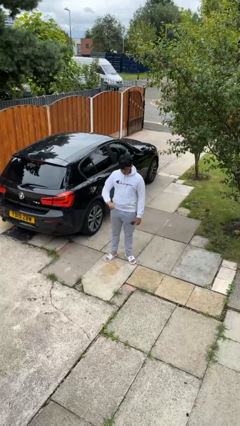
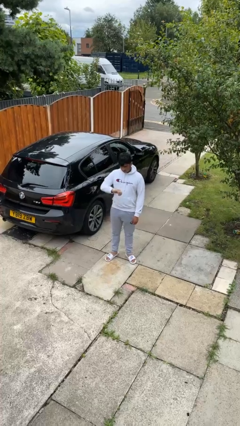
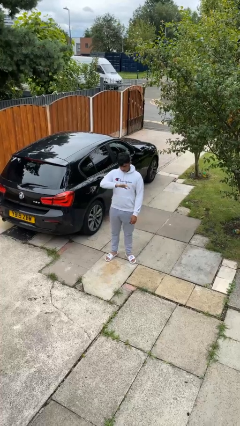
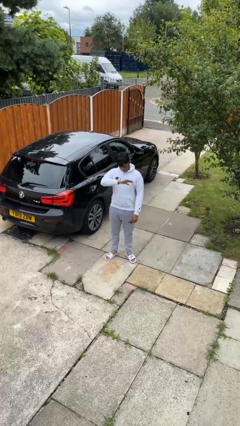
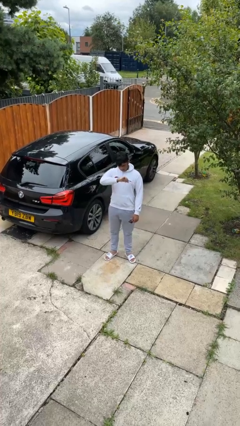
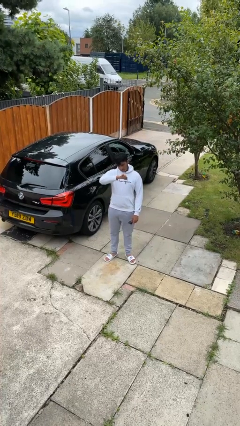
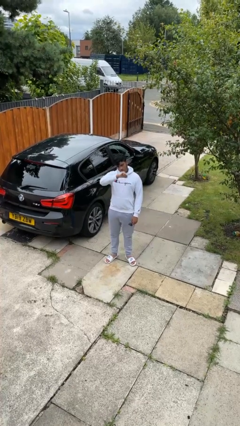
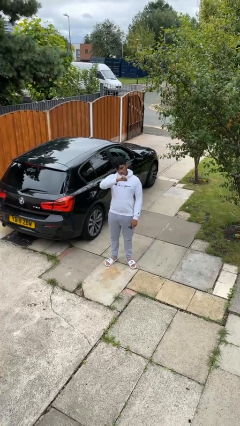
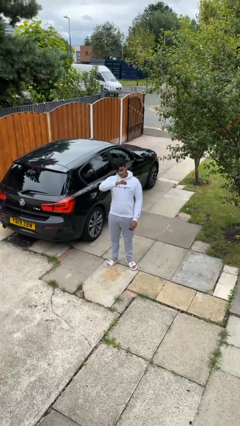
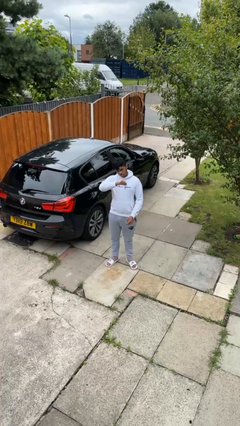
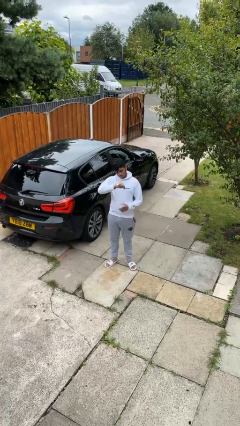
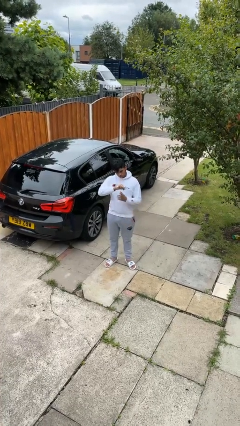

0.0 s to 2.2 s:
person looks at wristwatch

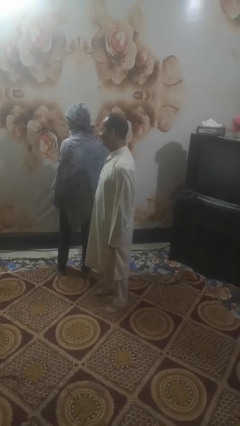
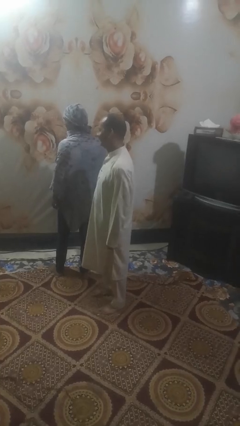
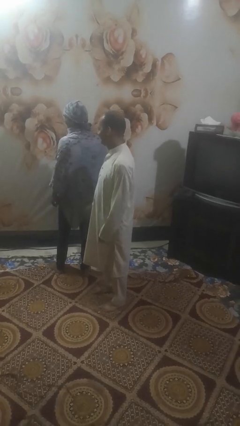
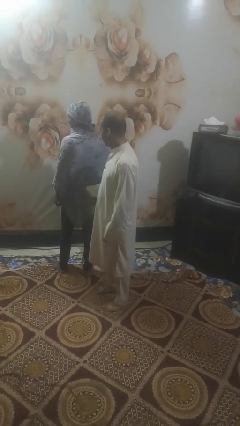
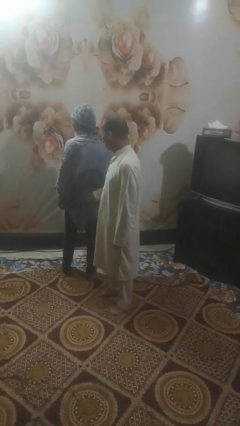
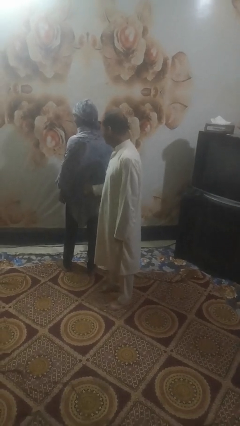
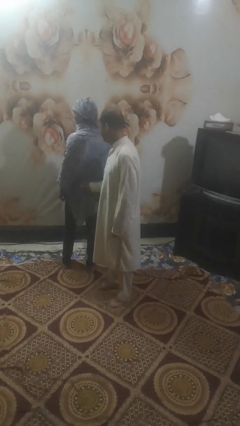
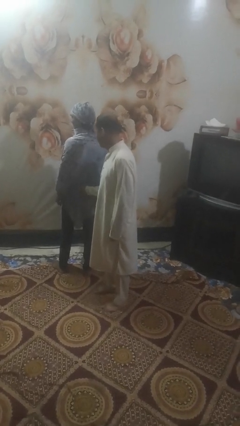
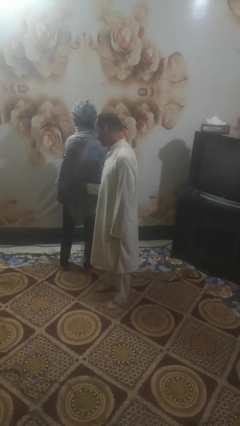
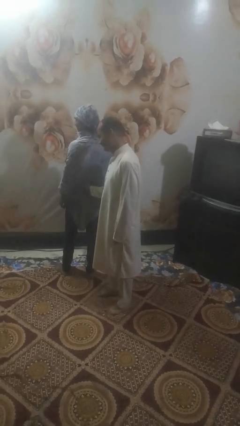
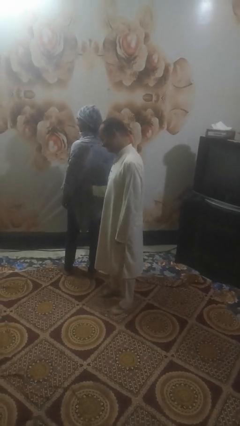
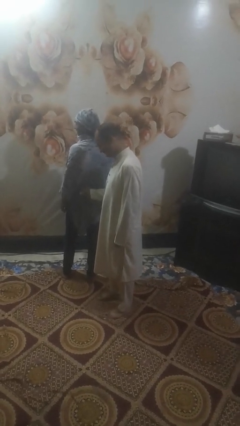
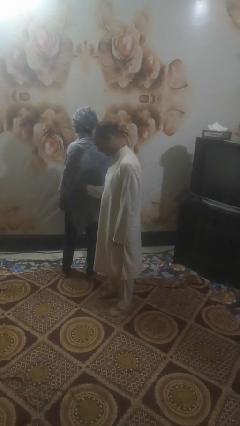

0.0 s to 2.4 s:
person touches back of person

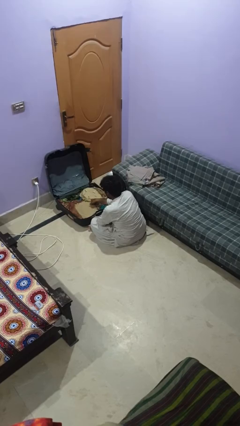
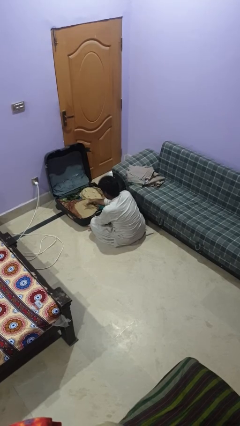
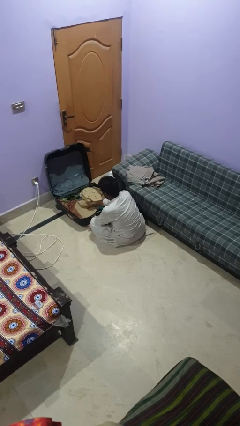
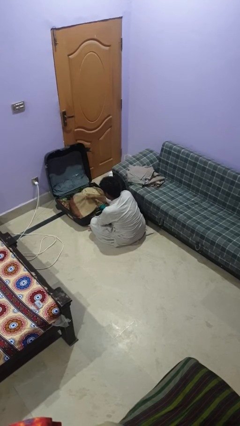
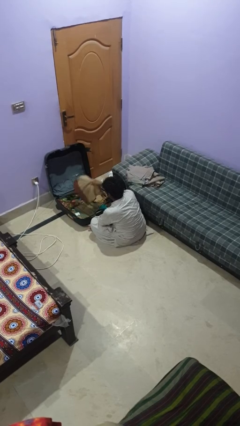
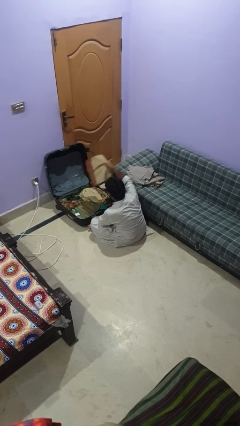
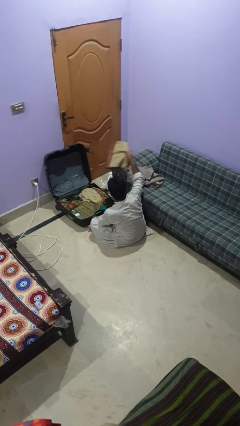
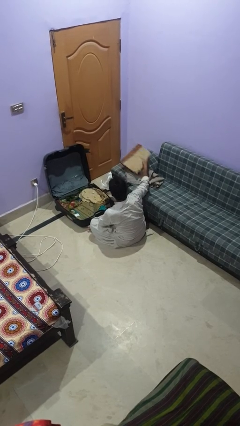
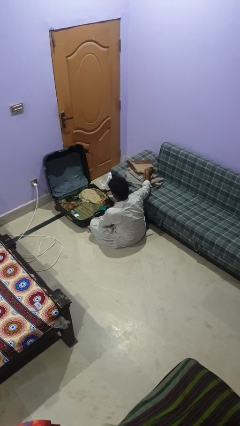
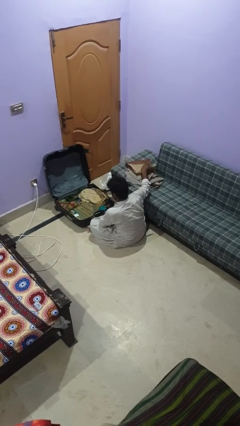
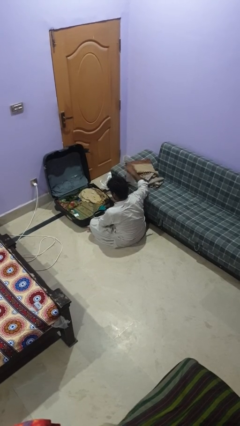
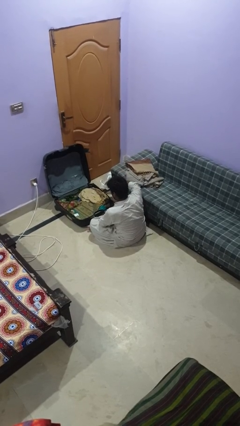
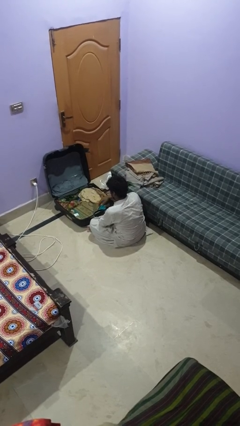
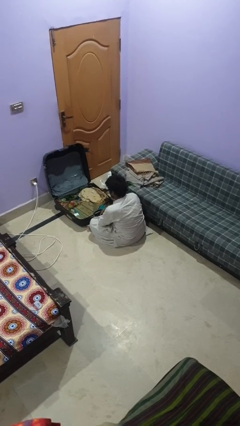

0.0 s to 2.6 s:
person unloads clothes from suitcase

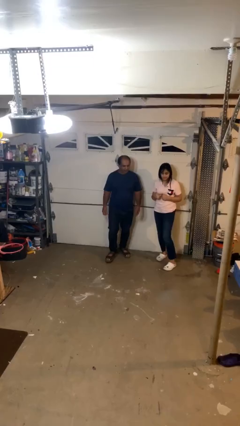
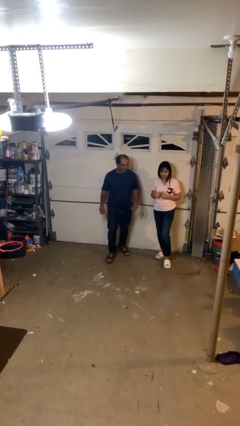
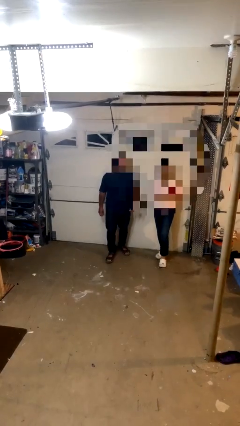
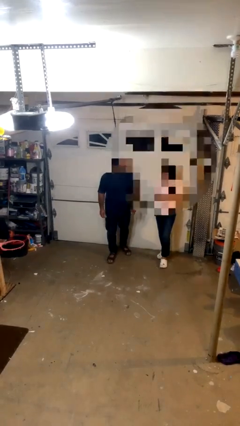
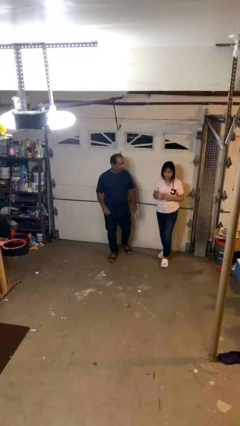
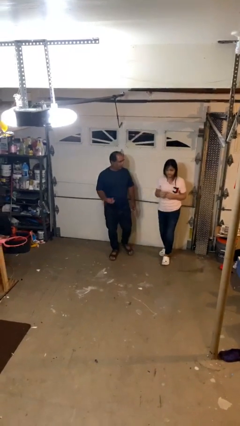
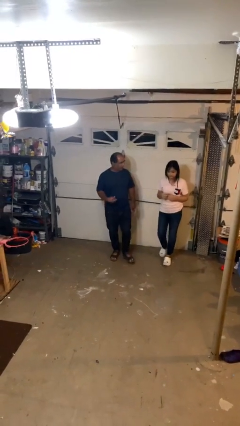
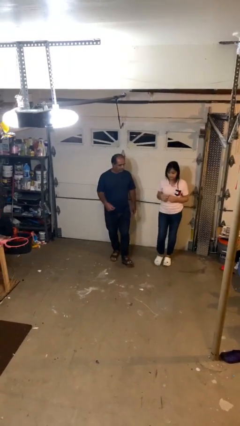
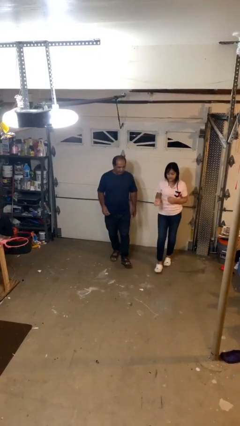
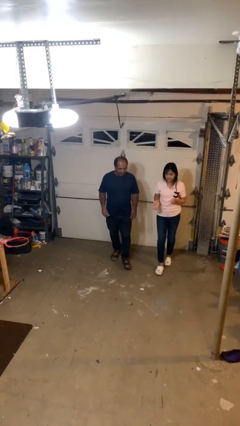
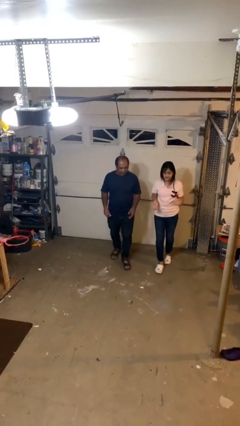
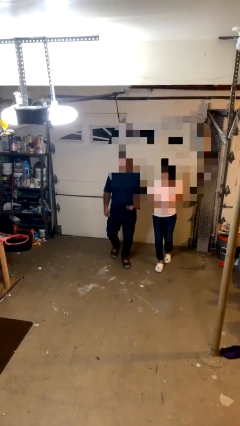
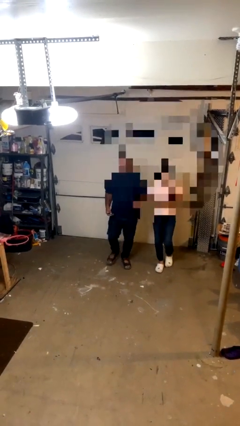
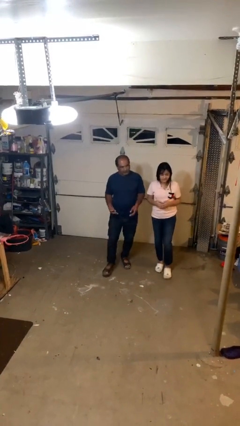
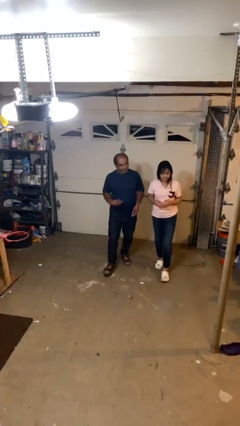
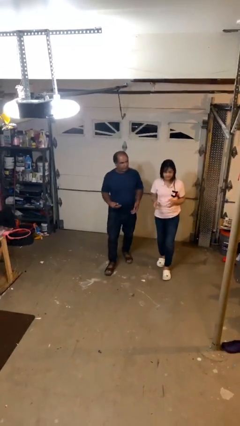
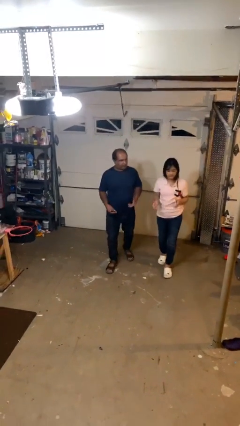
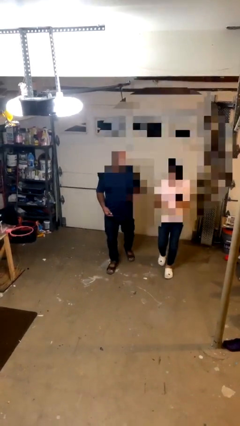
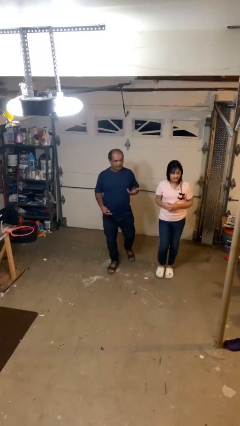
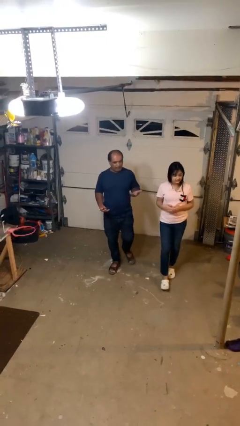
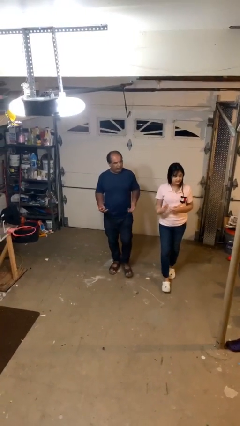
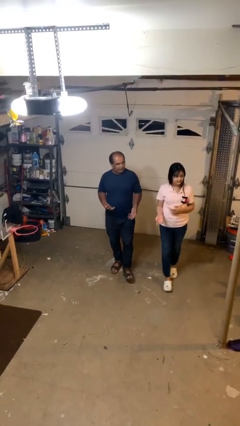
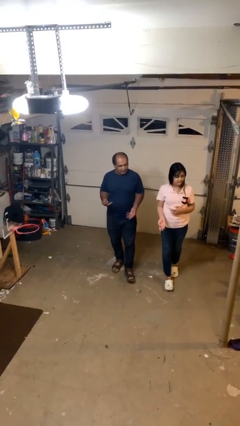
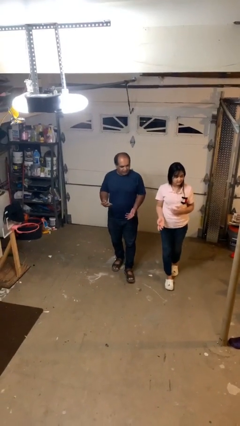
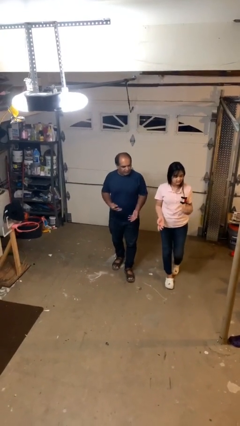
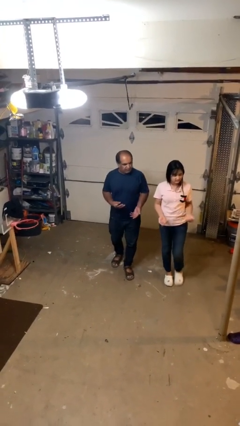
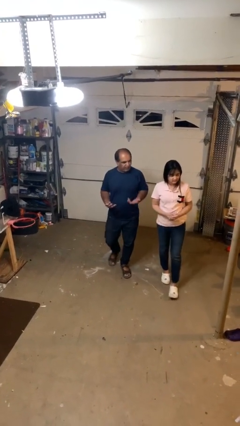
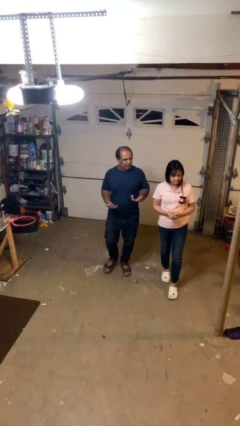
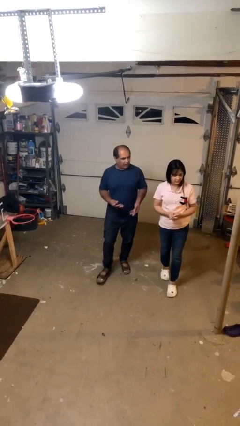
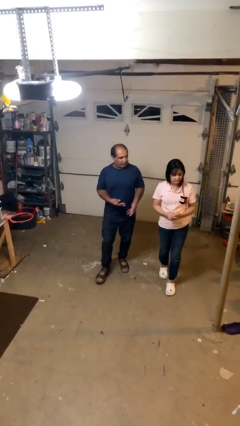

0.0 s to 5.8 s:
person talks to person

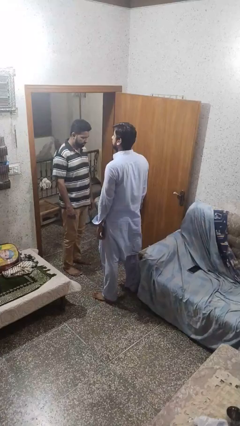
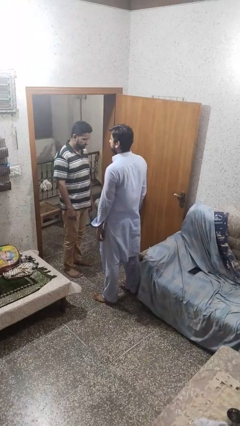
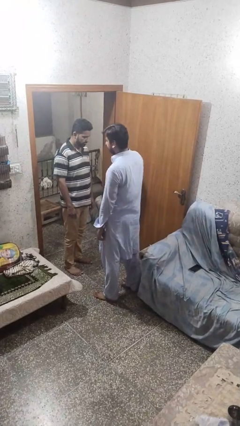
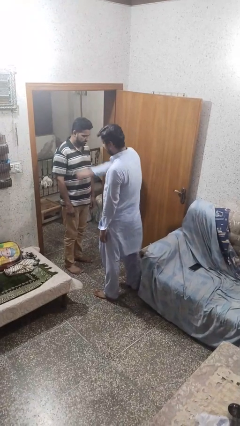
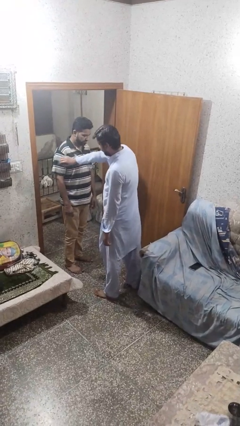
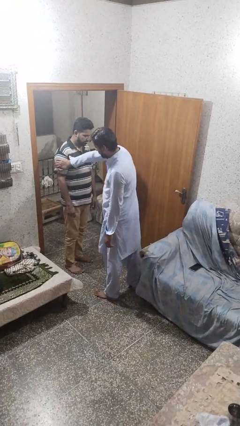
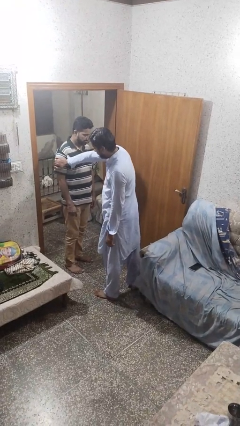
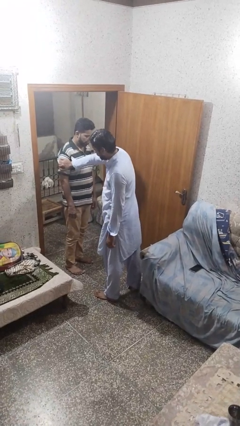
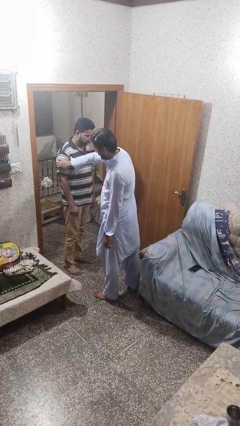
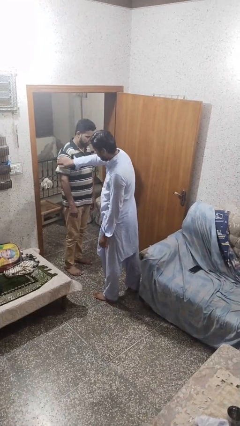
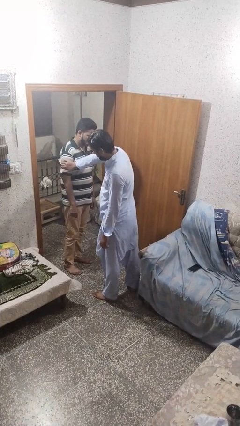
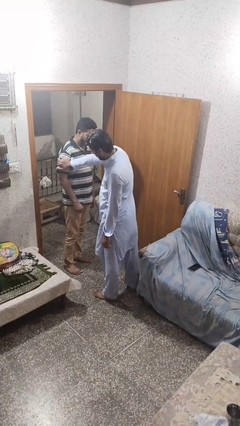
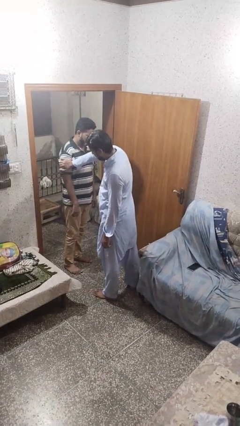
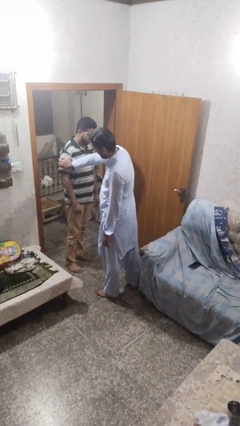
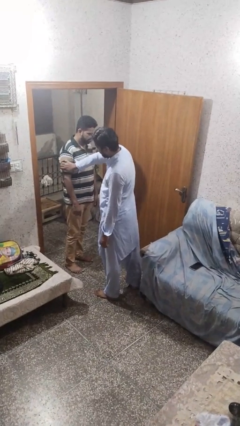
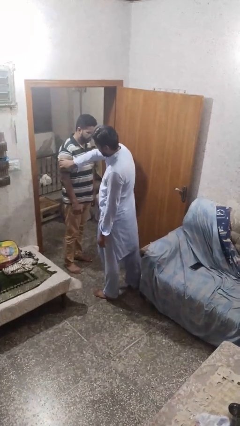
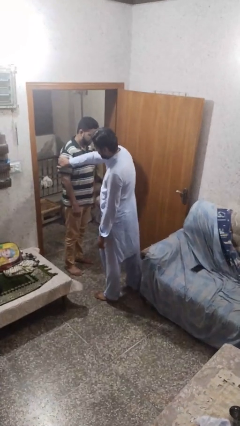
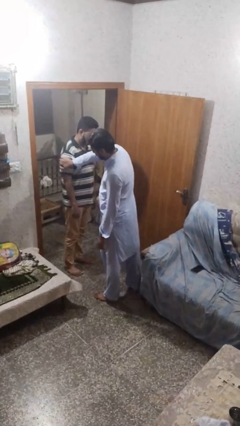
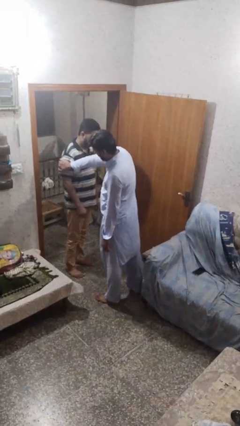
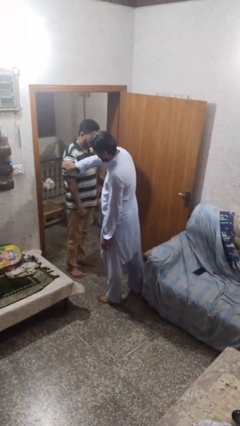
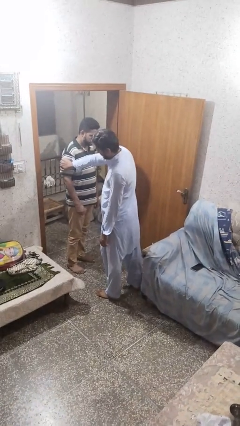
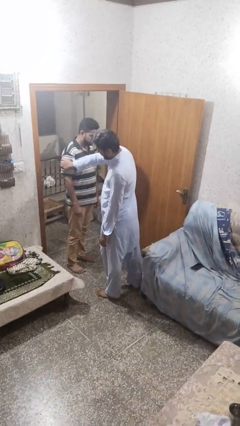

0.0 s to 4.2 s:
person grabs person by bicep

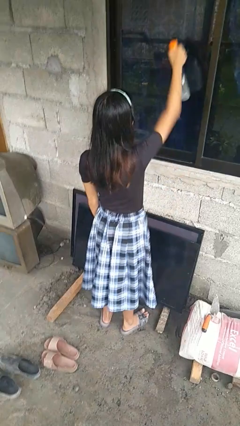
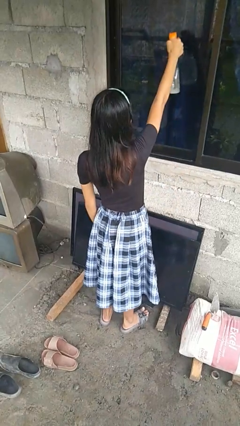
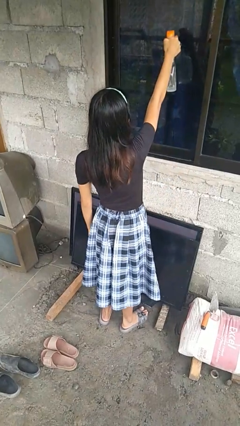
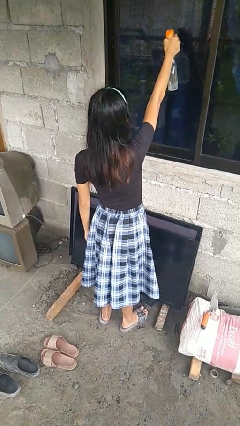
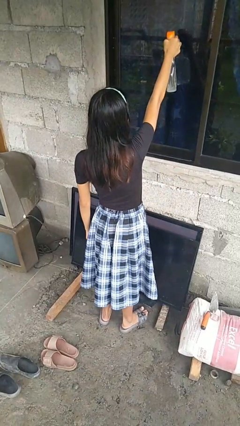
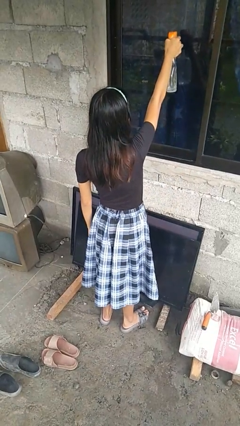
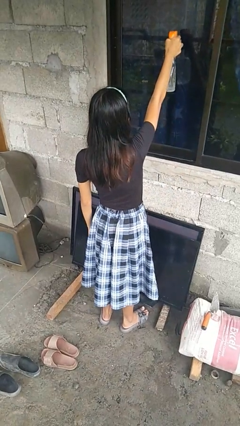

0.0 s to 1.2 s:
person sprays from bottle
